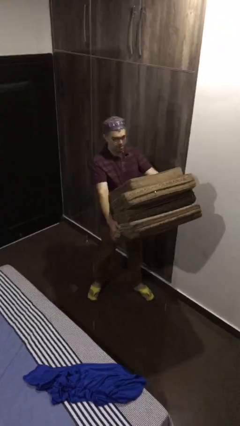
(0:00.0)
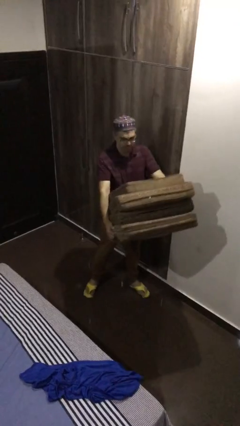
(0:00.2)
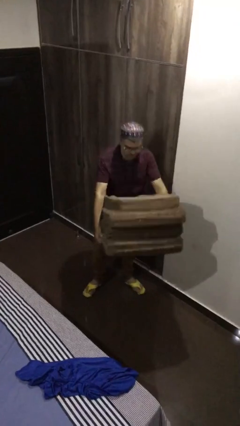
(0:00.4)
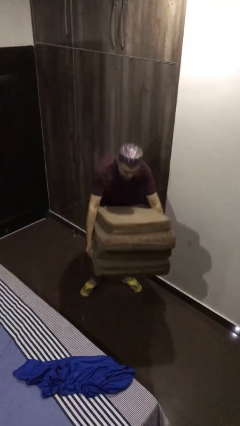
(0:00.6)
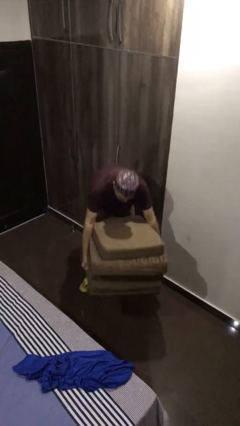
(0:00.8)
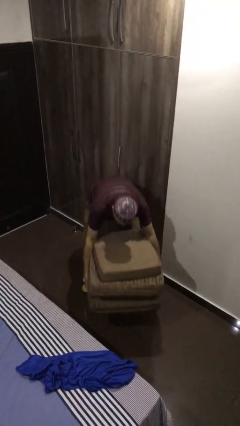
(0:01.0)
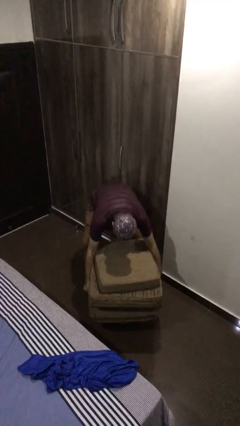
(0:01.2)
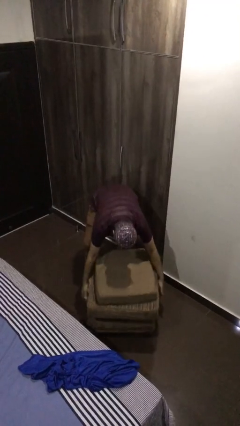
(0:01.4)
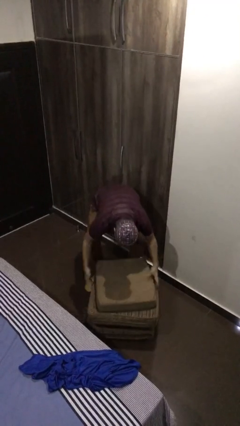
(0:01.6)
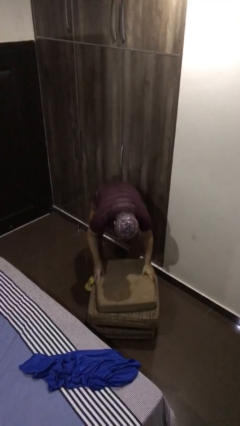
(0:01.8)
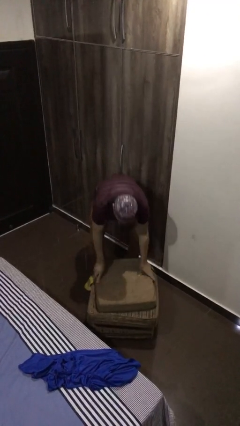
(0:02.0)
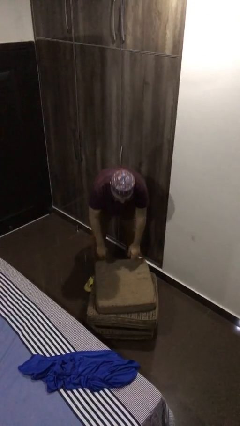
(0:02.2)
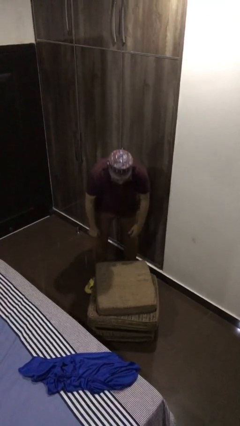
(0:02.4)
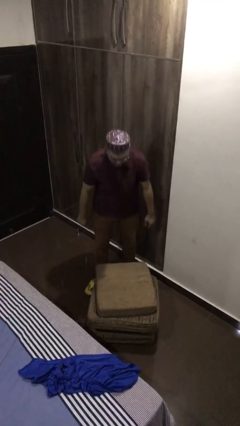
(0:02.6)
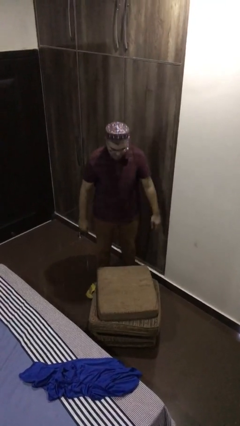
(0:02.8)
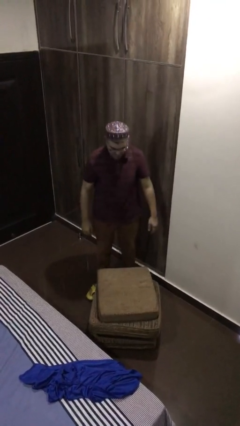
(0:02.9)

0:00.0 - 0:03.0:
person puts down object on floor

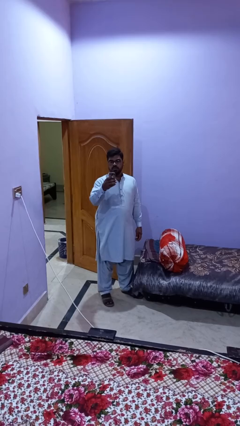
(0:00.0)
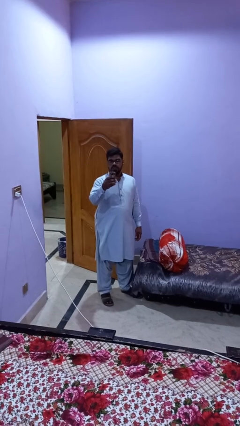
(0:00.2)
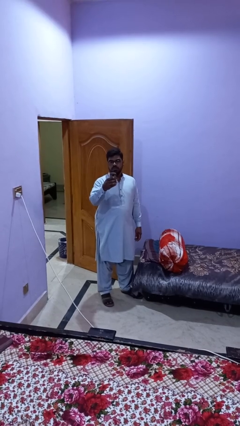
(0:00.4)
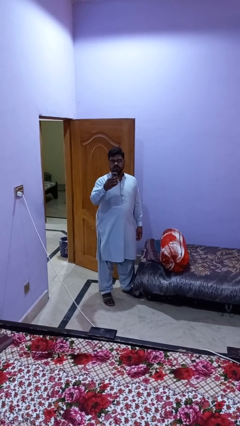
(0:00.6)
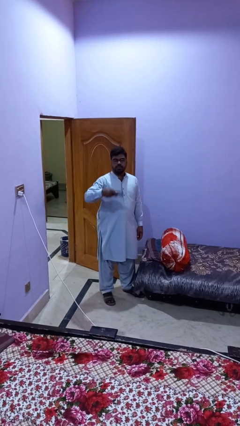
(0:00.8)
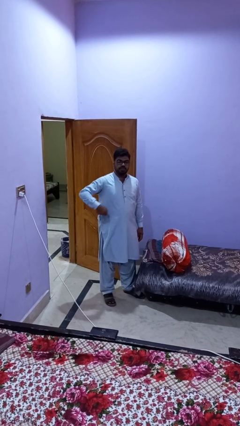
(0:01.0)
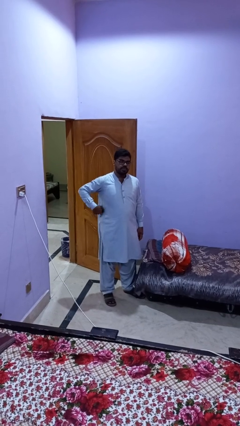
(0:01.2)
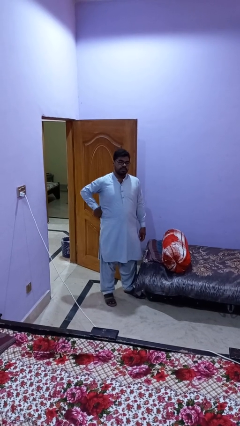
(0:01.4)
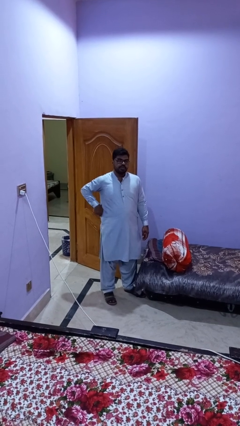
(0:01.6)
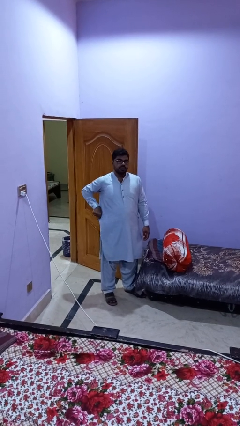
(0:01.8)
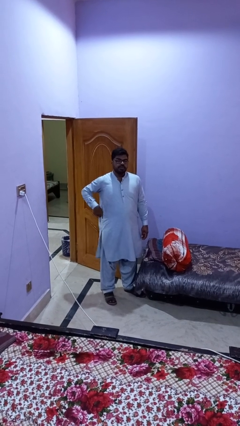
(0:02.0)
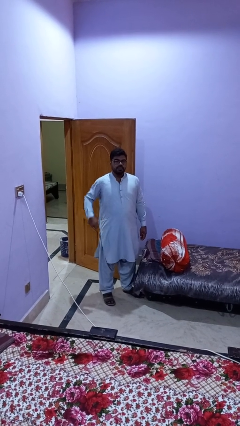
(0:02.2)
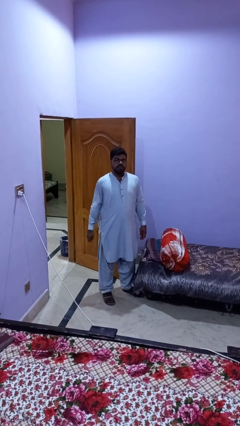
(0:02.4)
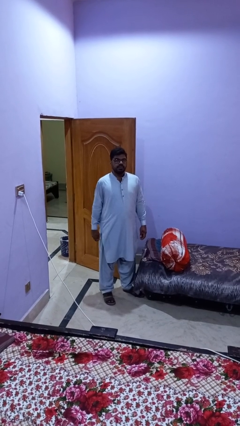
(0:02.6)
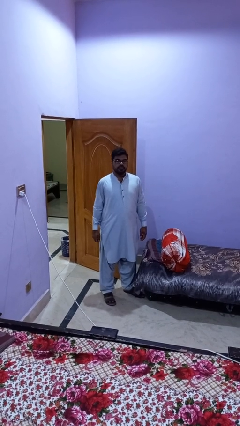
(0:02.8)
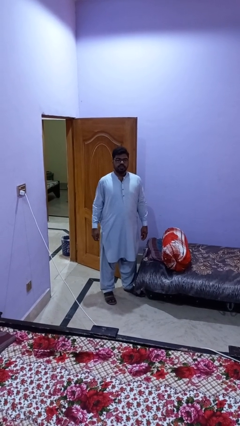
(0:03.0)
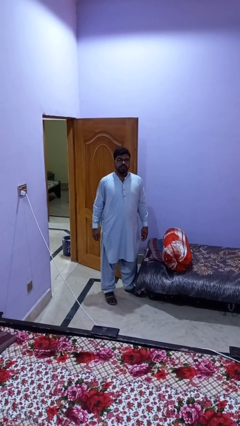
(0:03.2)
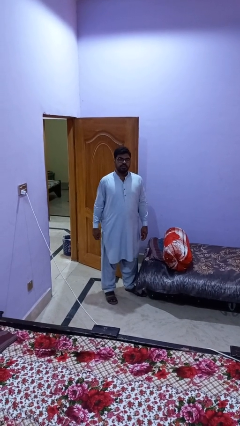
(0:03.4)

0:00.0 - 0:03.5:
person puts phone into pocket

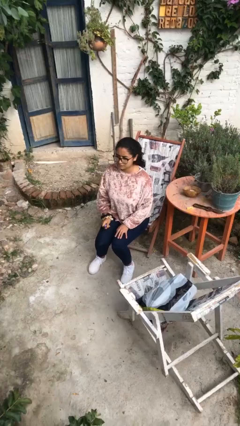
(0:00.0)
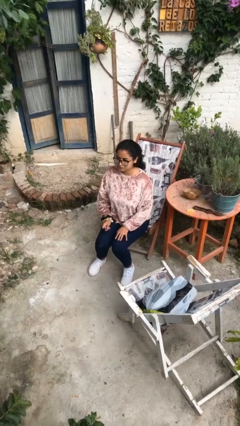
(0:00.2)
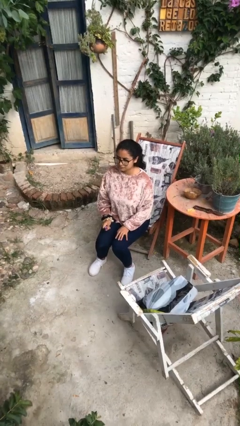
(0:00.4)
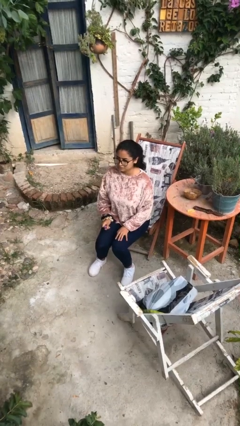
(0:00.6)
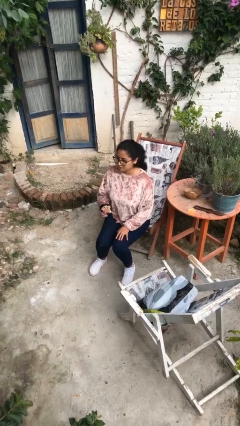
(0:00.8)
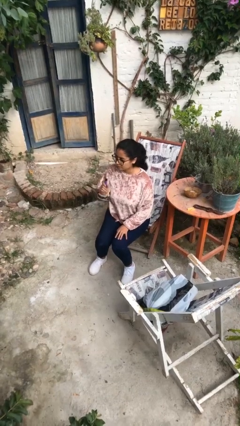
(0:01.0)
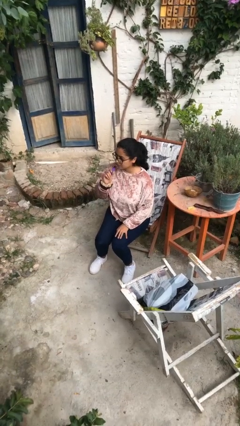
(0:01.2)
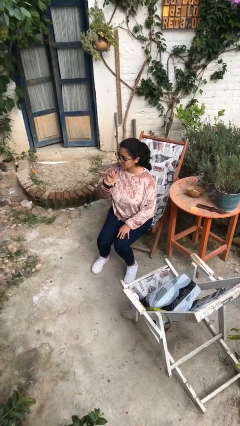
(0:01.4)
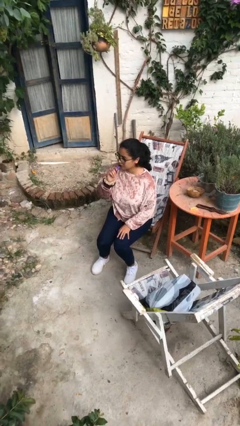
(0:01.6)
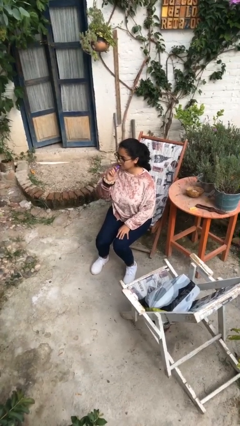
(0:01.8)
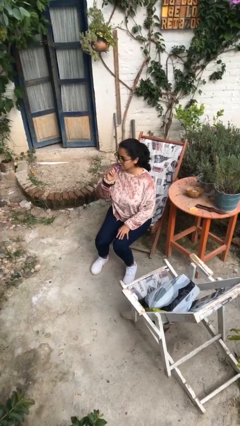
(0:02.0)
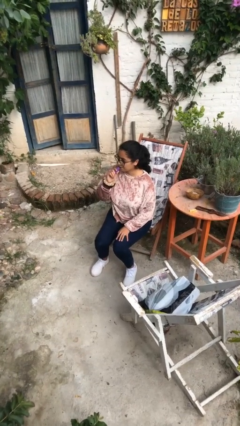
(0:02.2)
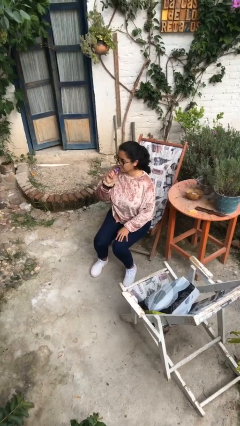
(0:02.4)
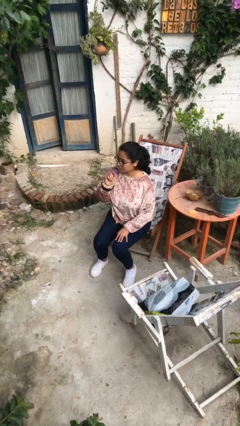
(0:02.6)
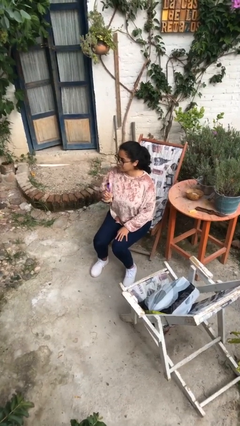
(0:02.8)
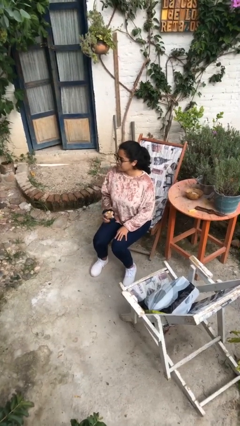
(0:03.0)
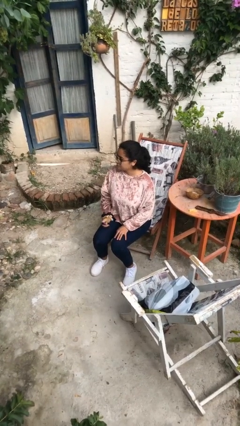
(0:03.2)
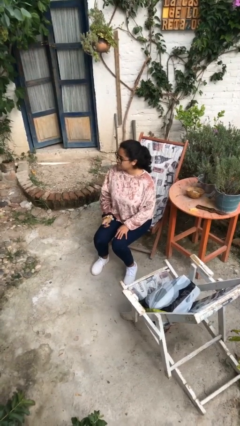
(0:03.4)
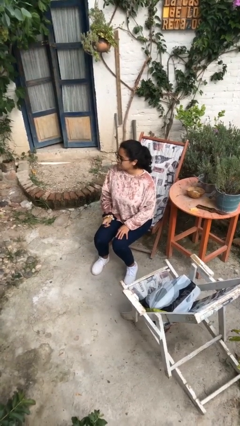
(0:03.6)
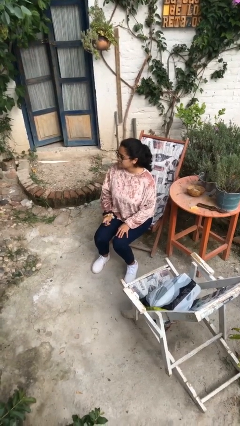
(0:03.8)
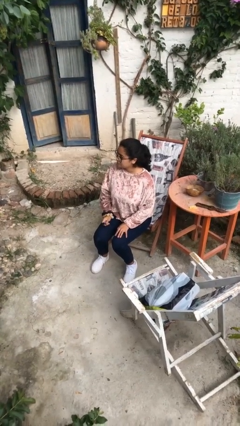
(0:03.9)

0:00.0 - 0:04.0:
person vapes

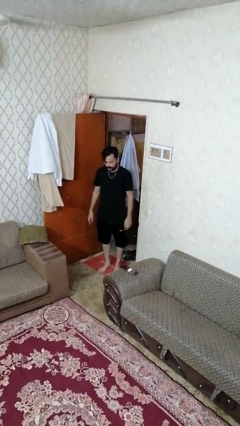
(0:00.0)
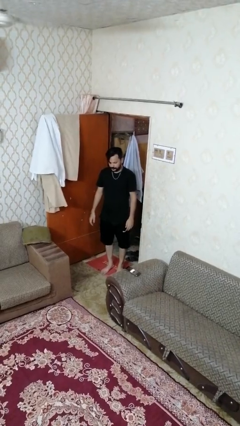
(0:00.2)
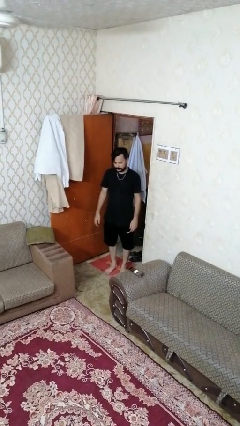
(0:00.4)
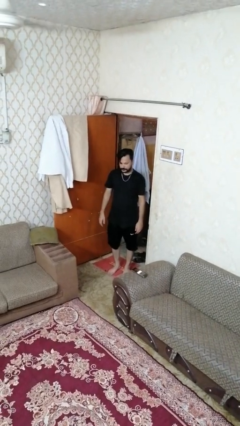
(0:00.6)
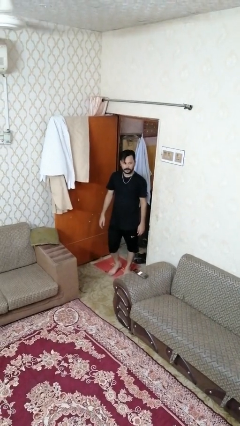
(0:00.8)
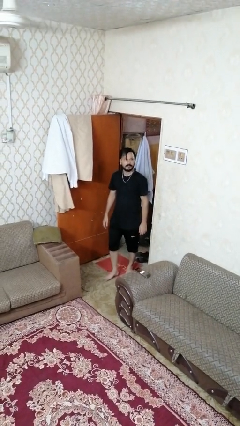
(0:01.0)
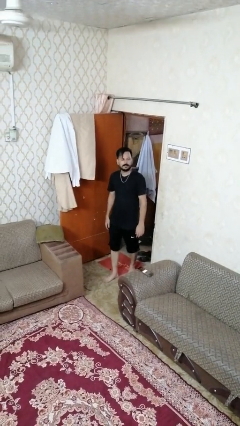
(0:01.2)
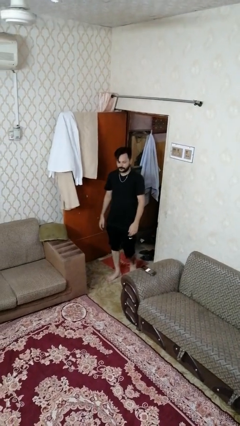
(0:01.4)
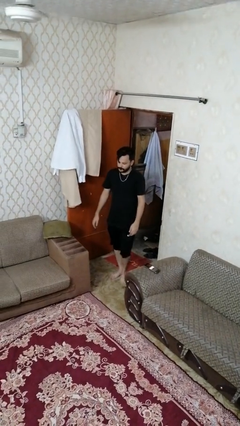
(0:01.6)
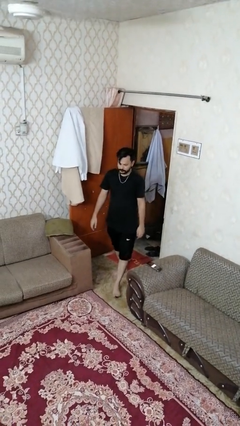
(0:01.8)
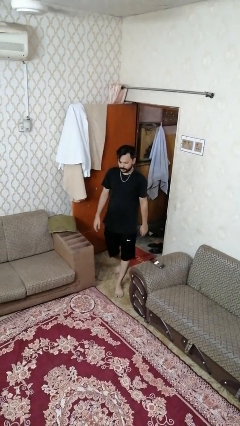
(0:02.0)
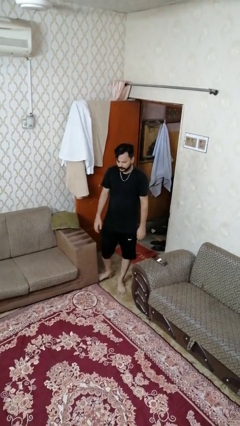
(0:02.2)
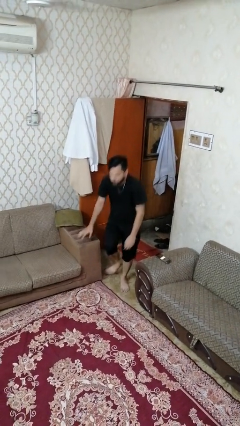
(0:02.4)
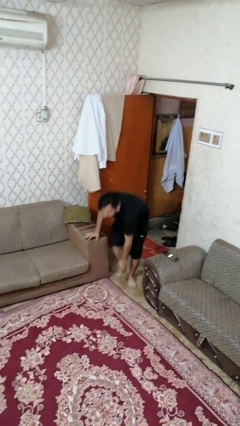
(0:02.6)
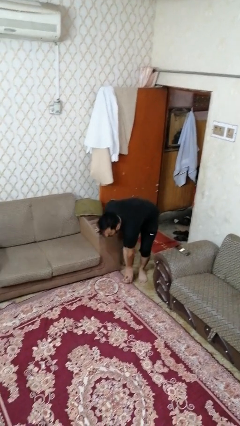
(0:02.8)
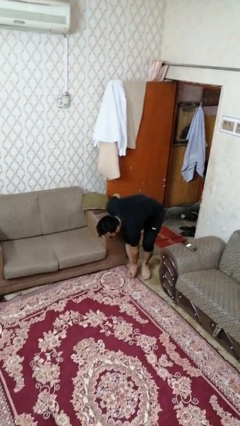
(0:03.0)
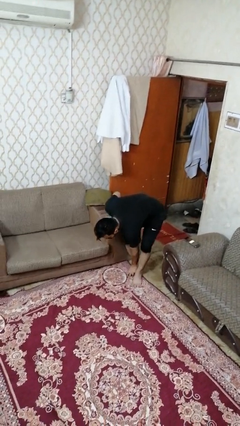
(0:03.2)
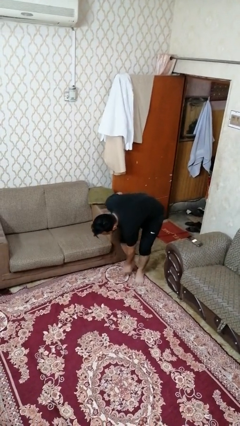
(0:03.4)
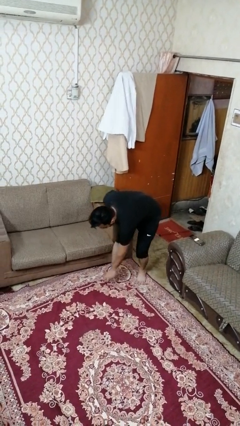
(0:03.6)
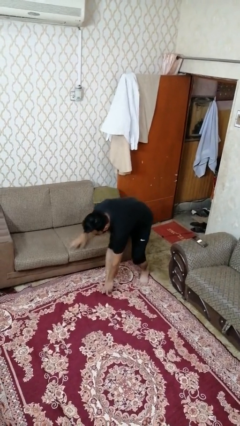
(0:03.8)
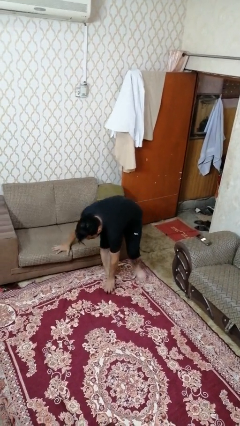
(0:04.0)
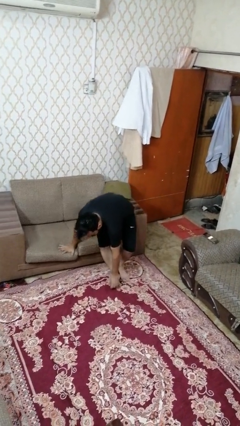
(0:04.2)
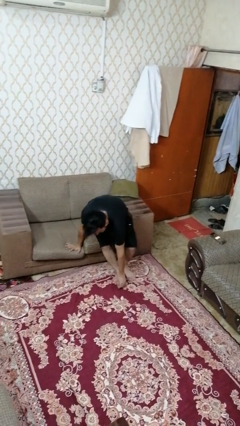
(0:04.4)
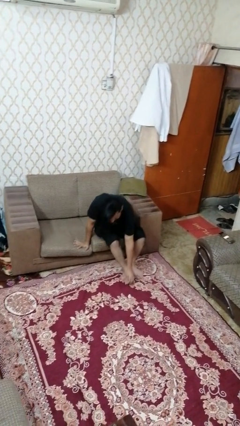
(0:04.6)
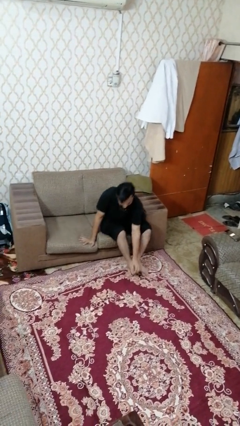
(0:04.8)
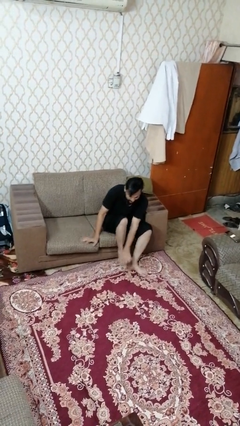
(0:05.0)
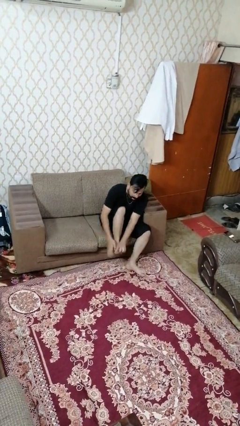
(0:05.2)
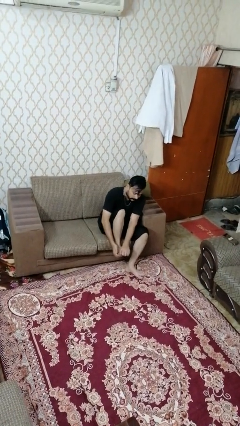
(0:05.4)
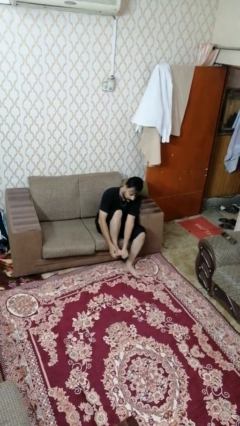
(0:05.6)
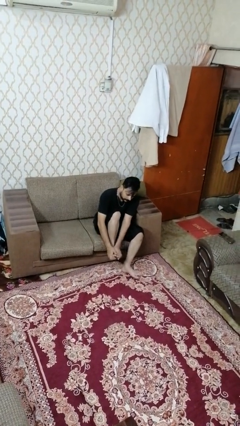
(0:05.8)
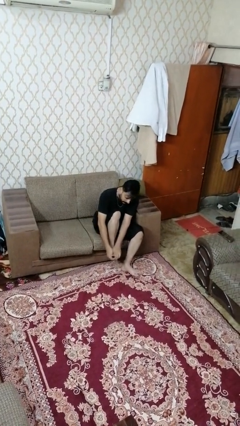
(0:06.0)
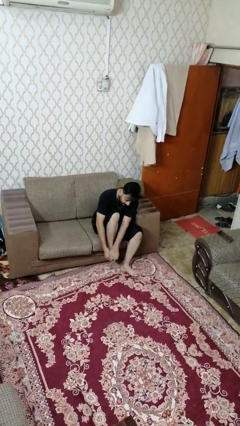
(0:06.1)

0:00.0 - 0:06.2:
person stubs toe

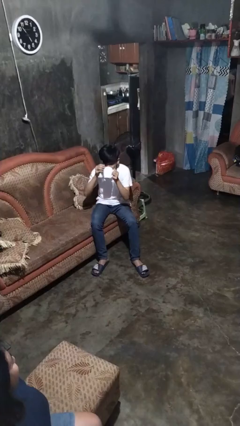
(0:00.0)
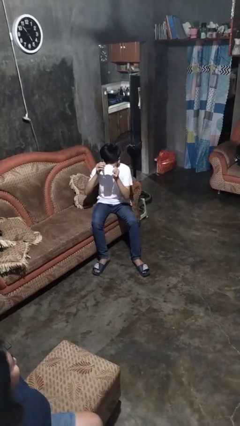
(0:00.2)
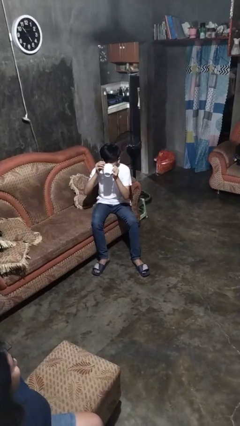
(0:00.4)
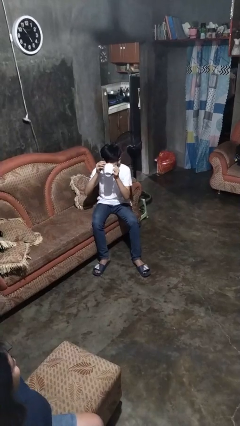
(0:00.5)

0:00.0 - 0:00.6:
person stirs mug

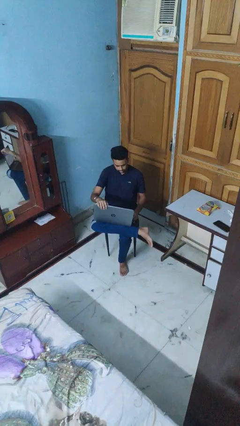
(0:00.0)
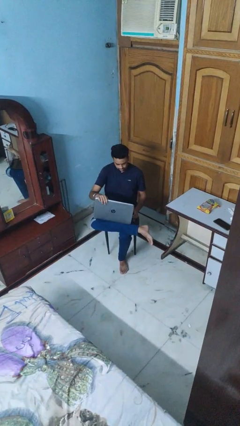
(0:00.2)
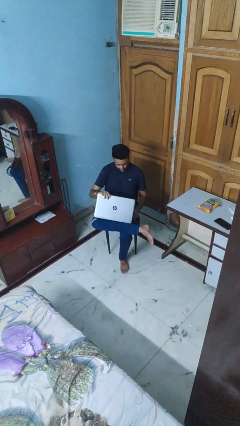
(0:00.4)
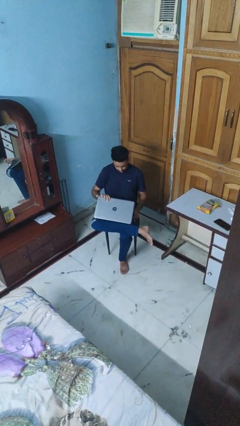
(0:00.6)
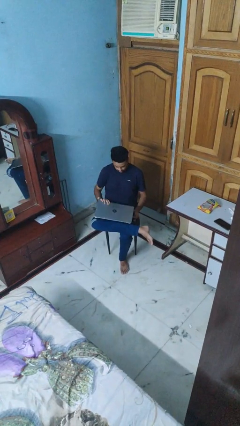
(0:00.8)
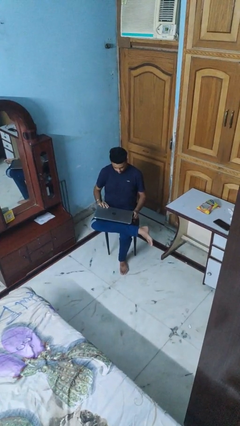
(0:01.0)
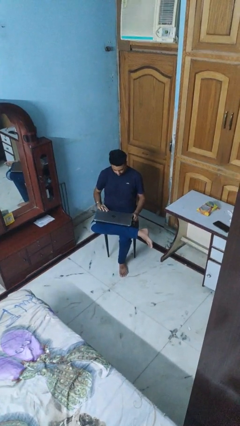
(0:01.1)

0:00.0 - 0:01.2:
person closes laptop
